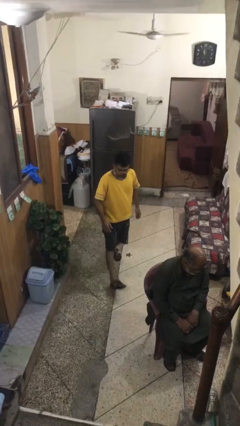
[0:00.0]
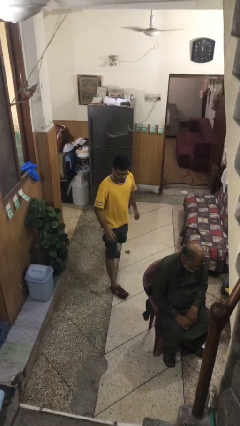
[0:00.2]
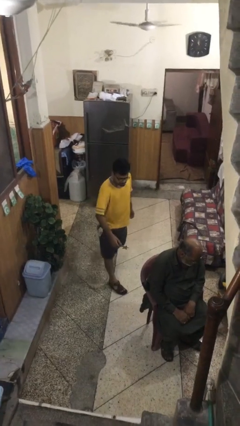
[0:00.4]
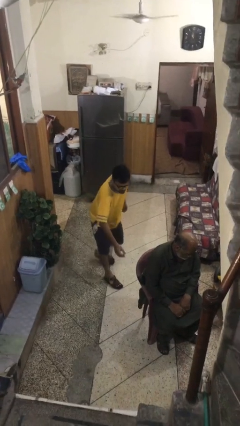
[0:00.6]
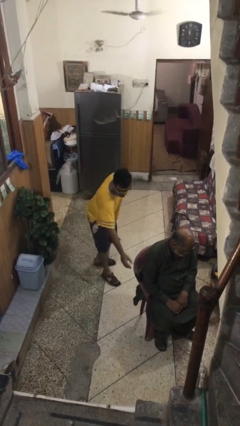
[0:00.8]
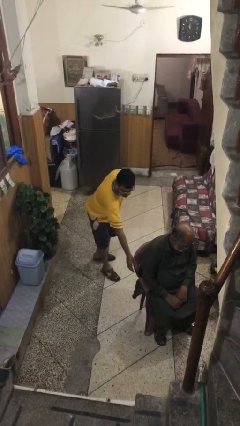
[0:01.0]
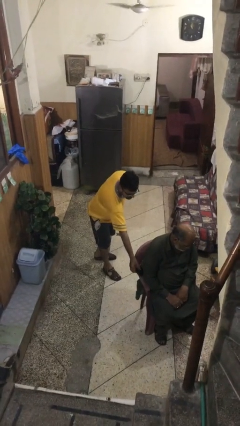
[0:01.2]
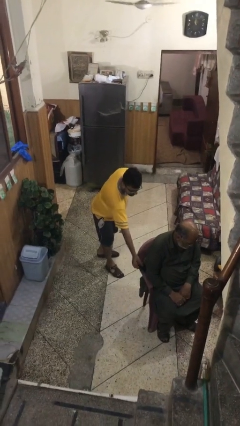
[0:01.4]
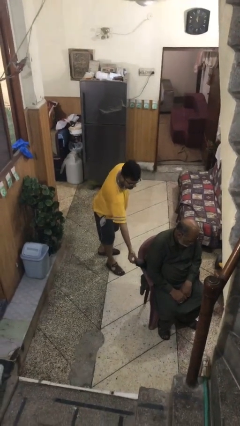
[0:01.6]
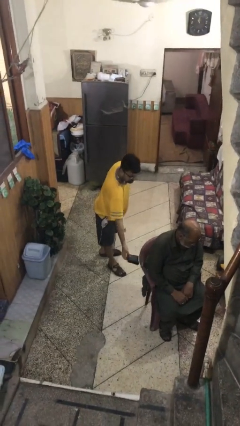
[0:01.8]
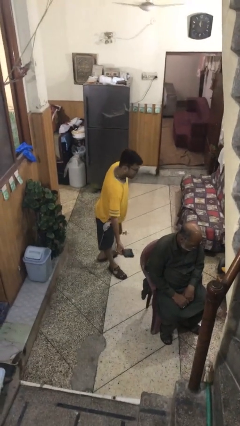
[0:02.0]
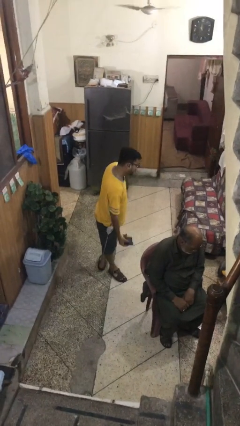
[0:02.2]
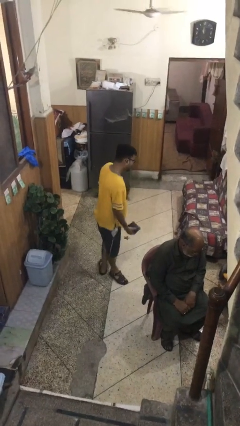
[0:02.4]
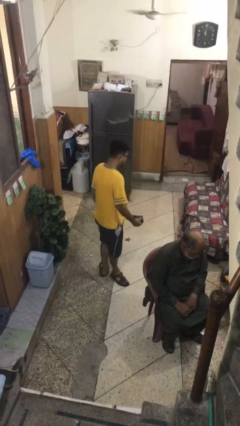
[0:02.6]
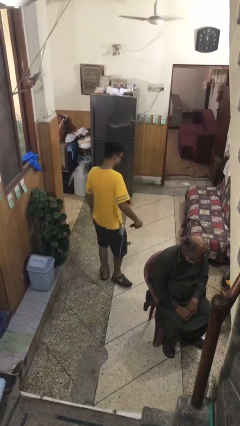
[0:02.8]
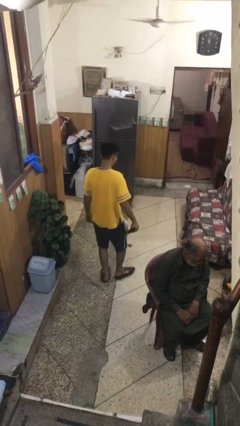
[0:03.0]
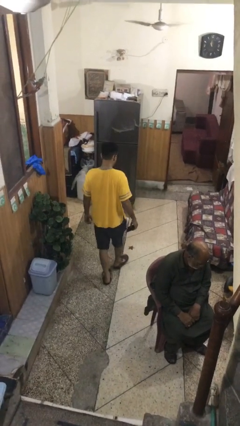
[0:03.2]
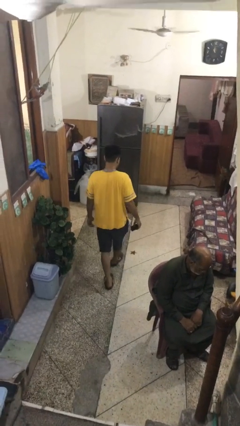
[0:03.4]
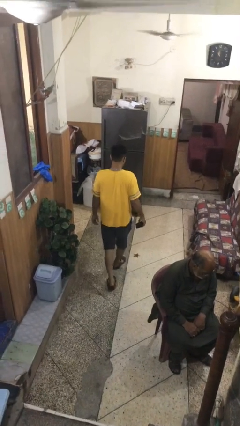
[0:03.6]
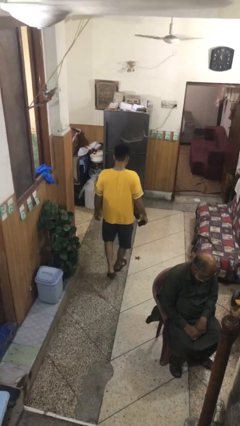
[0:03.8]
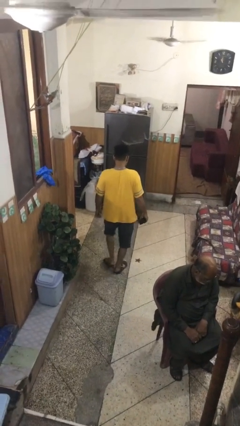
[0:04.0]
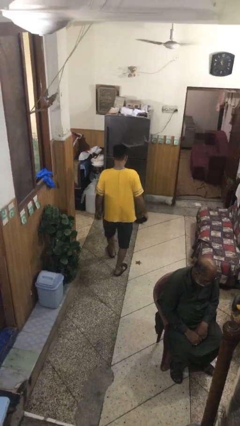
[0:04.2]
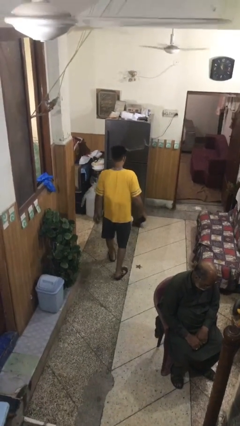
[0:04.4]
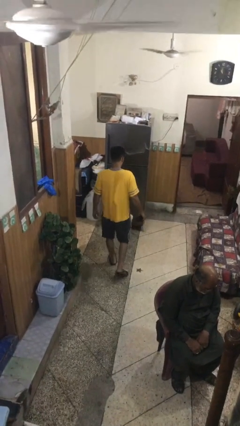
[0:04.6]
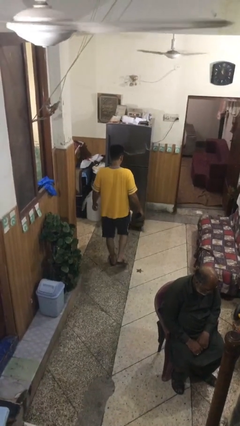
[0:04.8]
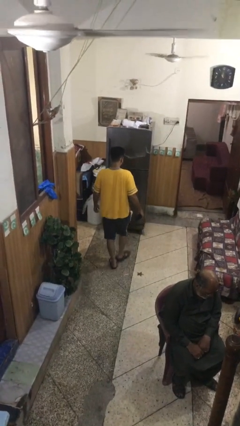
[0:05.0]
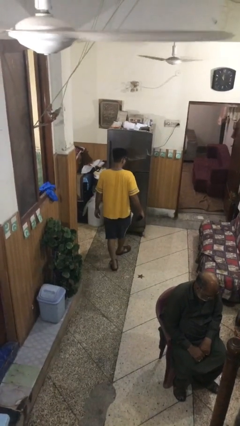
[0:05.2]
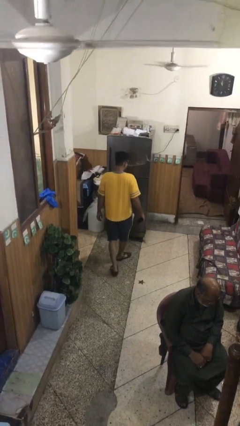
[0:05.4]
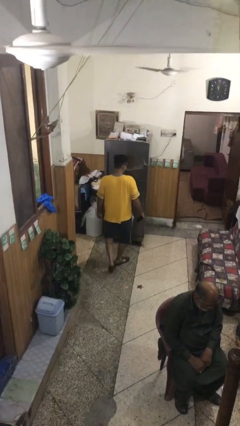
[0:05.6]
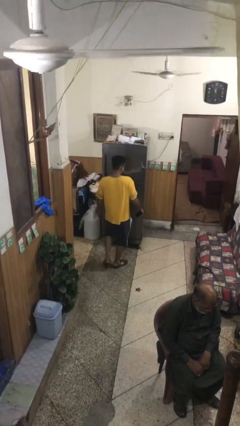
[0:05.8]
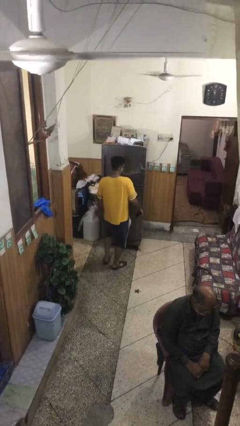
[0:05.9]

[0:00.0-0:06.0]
person steals object from person

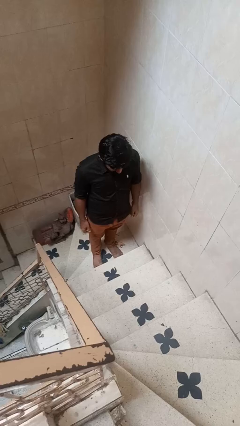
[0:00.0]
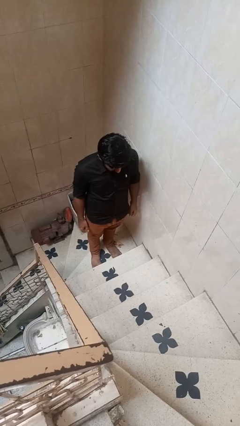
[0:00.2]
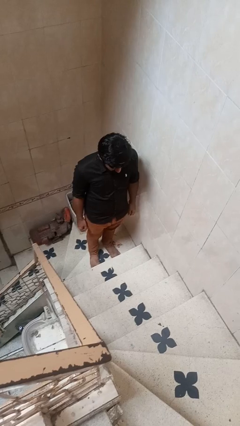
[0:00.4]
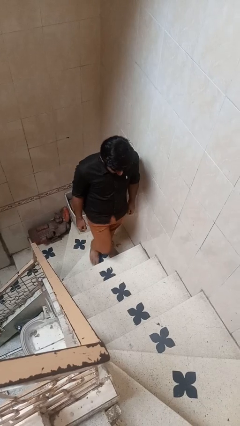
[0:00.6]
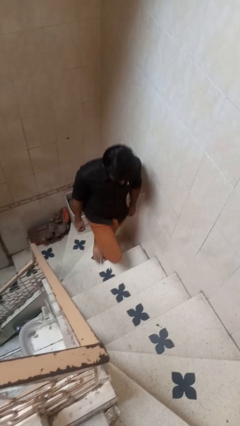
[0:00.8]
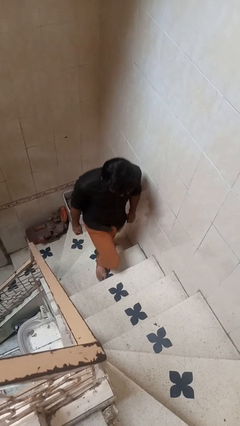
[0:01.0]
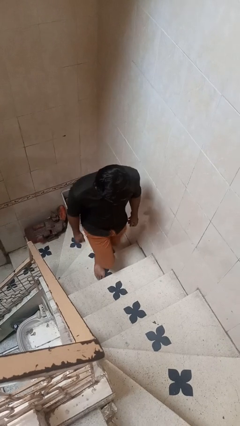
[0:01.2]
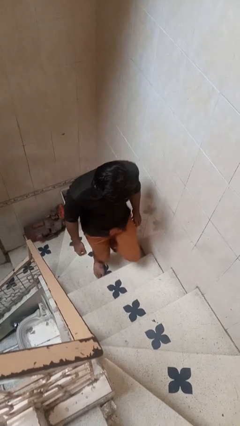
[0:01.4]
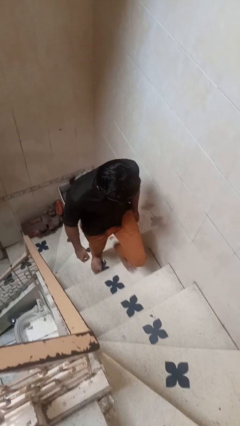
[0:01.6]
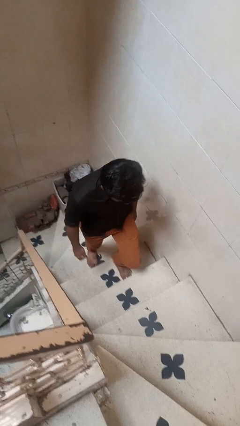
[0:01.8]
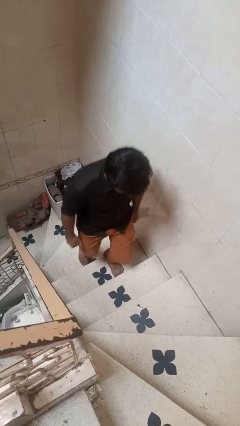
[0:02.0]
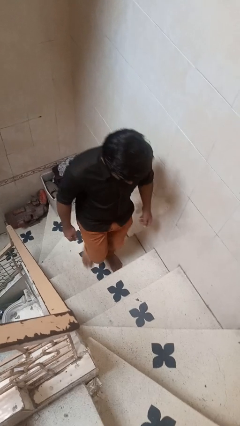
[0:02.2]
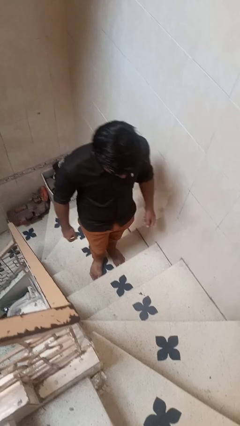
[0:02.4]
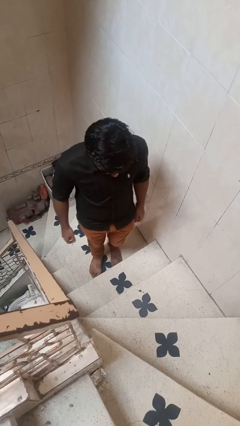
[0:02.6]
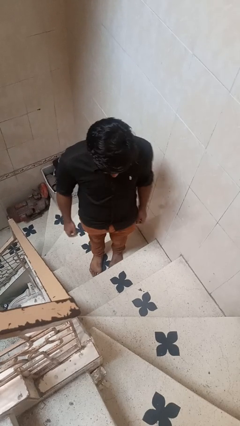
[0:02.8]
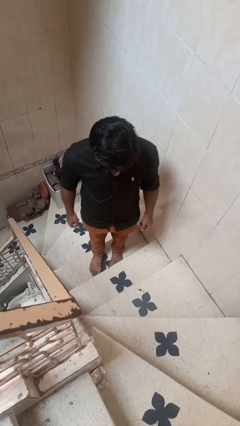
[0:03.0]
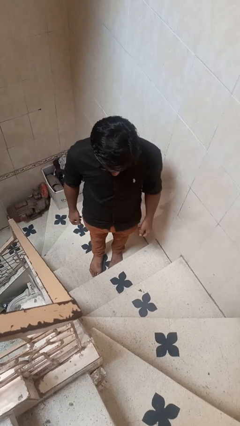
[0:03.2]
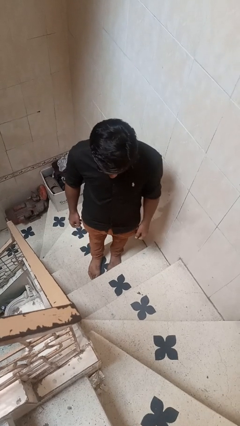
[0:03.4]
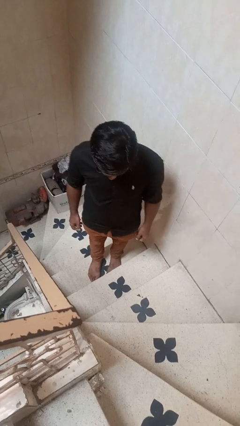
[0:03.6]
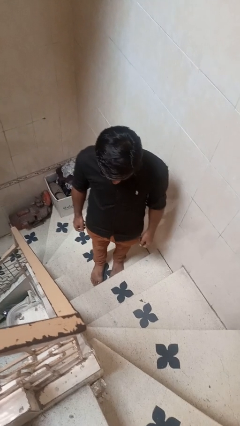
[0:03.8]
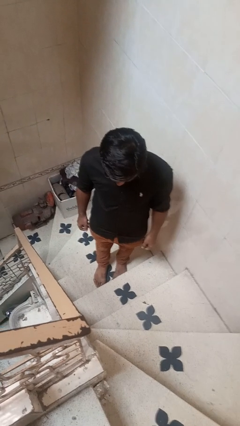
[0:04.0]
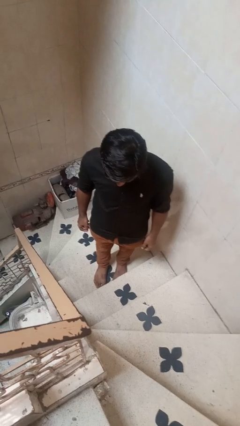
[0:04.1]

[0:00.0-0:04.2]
person climbs up stairs

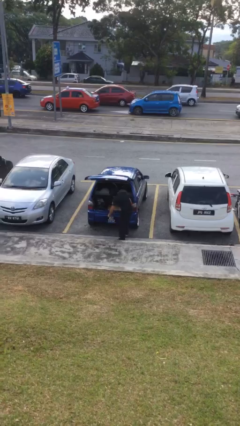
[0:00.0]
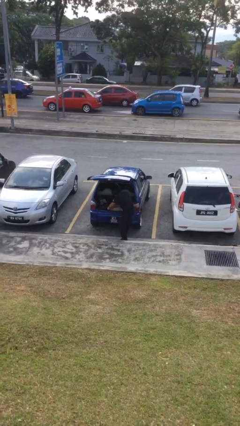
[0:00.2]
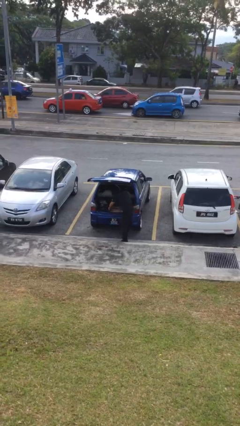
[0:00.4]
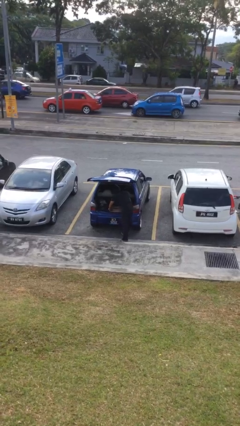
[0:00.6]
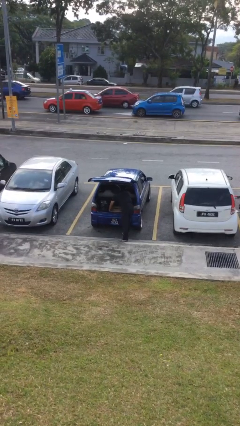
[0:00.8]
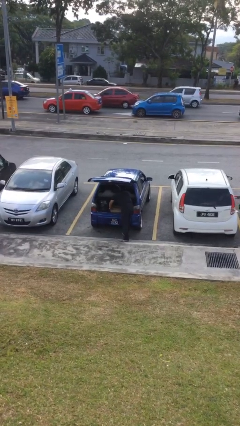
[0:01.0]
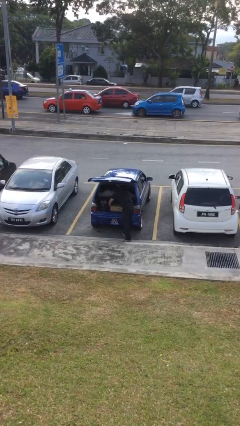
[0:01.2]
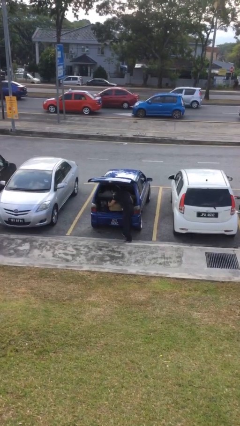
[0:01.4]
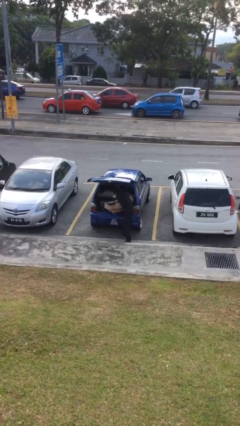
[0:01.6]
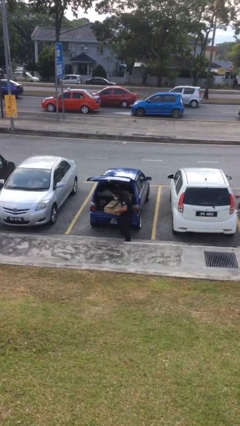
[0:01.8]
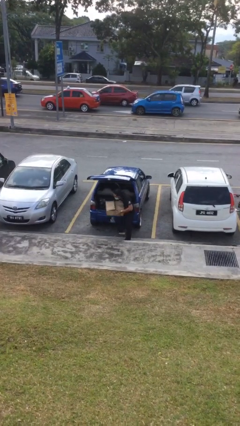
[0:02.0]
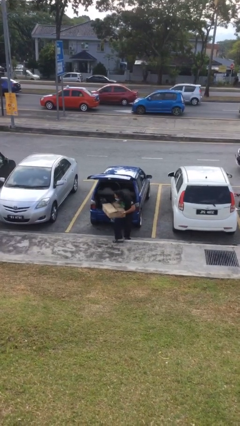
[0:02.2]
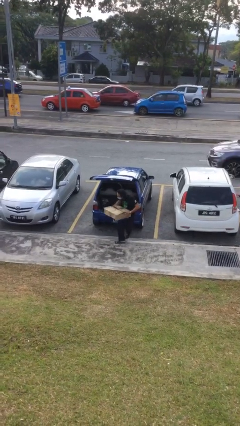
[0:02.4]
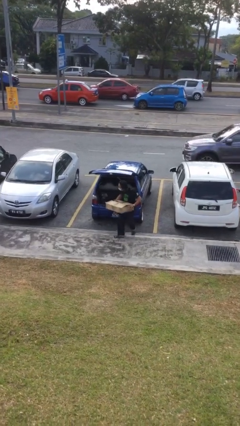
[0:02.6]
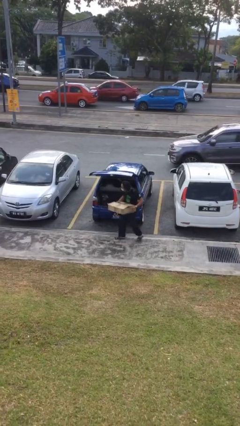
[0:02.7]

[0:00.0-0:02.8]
person unloads car

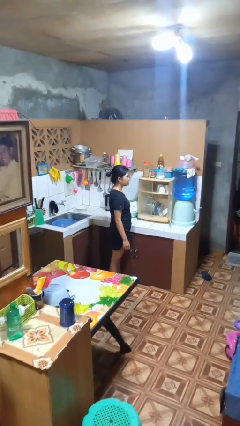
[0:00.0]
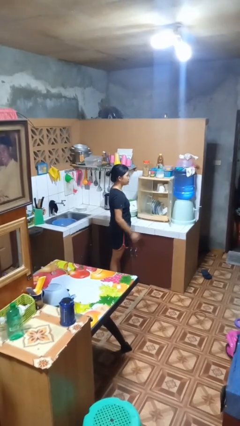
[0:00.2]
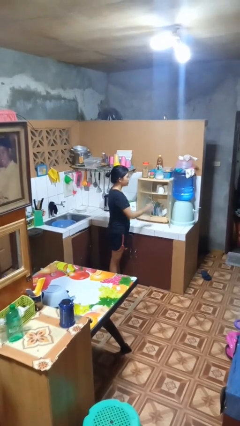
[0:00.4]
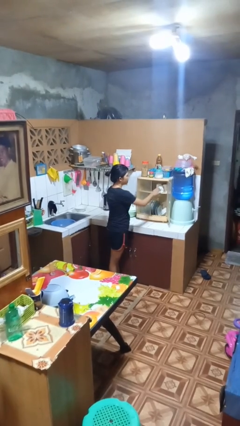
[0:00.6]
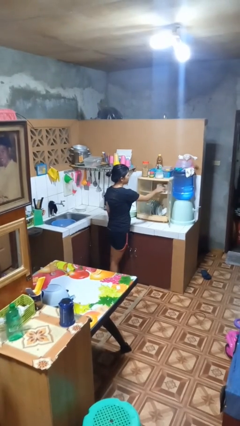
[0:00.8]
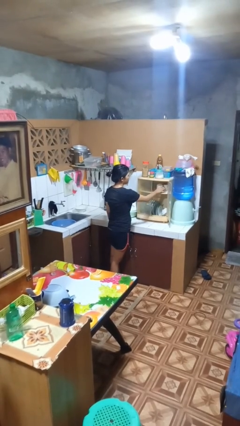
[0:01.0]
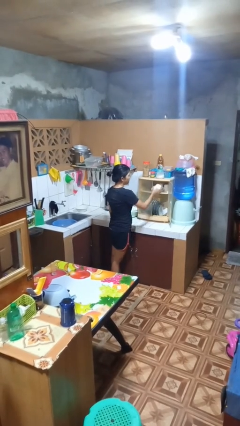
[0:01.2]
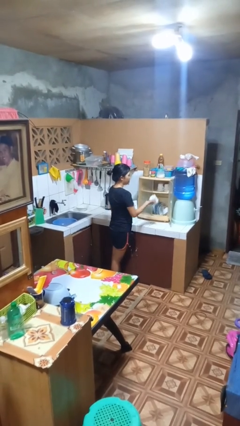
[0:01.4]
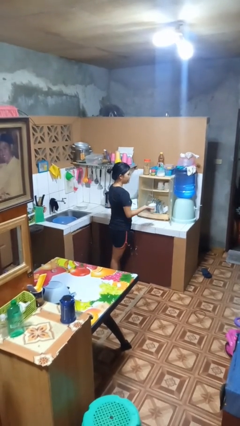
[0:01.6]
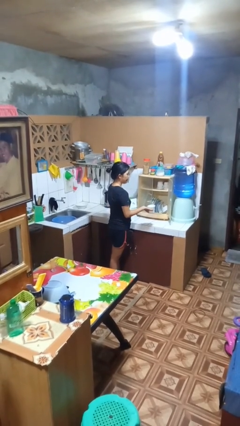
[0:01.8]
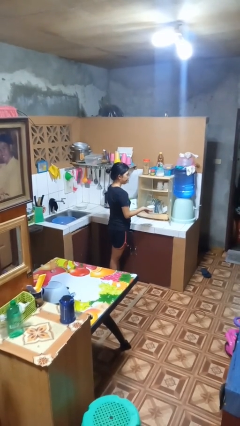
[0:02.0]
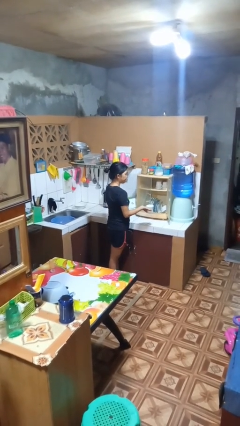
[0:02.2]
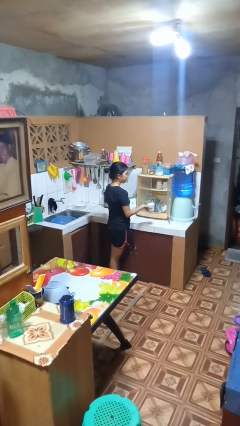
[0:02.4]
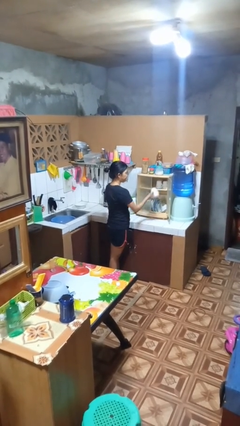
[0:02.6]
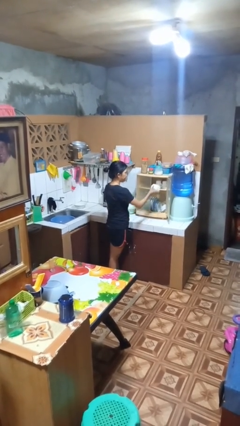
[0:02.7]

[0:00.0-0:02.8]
person takes object from kitchen drawer

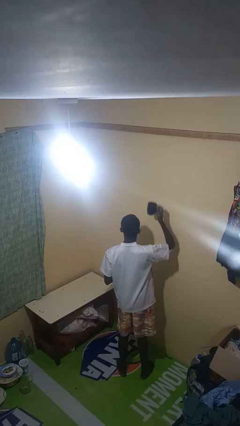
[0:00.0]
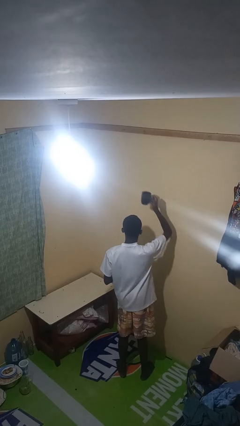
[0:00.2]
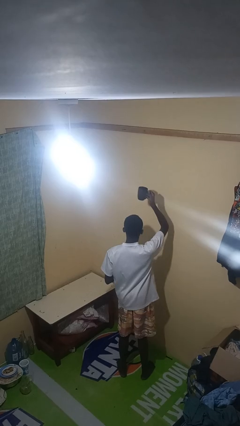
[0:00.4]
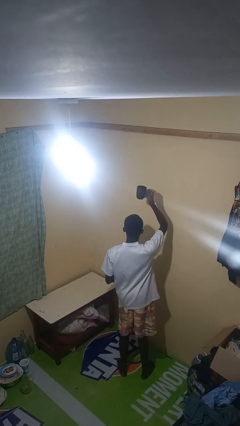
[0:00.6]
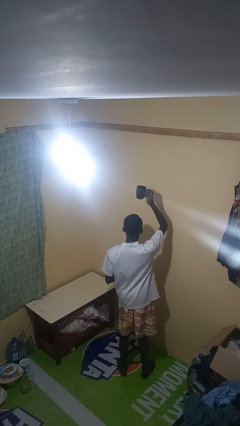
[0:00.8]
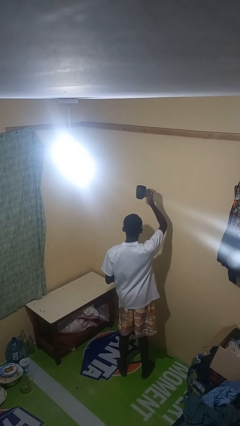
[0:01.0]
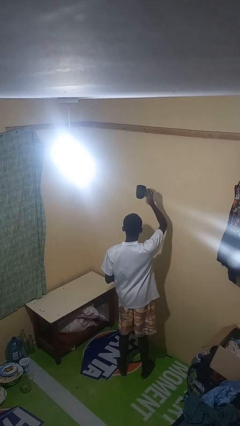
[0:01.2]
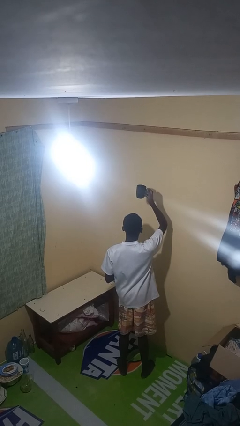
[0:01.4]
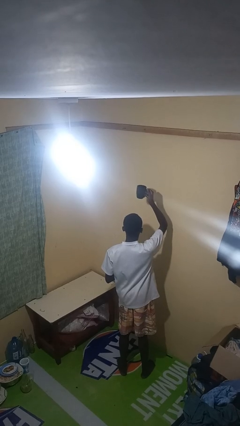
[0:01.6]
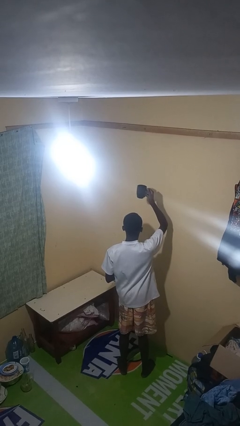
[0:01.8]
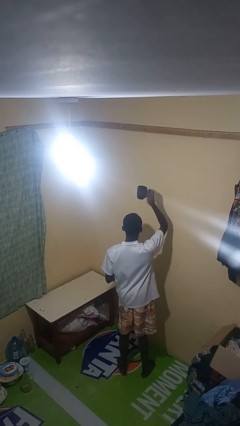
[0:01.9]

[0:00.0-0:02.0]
person holds object above head
